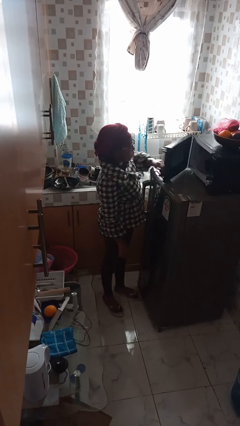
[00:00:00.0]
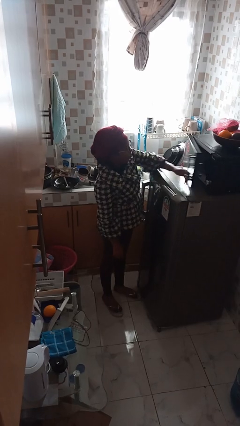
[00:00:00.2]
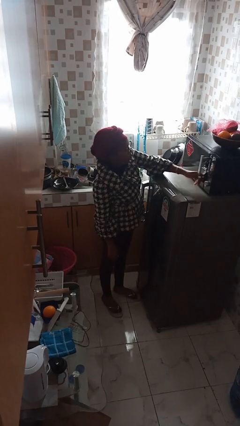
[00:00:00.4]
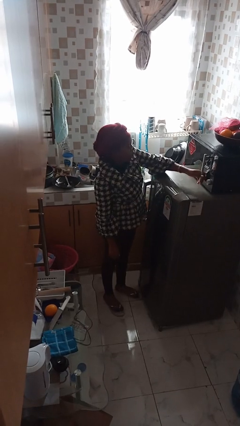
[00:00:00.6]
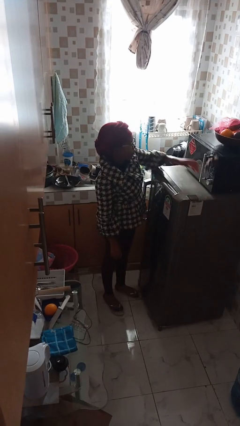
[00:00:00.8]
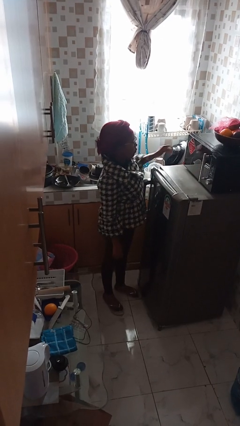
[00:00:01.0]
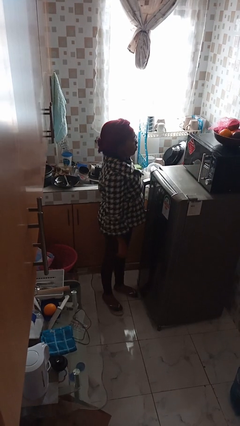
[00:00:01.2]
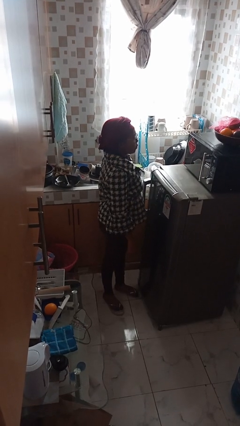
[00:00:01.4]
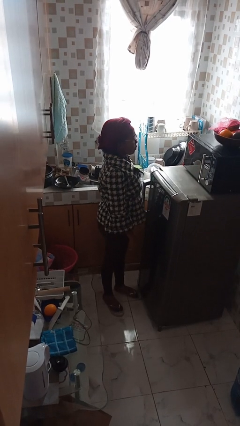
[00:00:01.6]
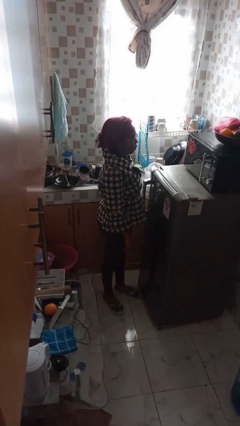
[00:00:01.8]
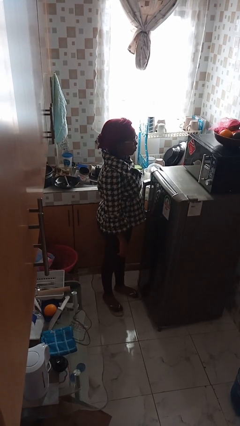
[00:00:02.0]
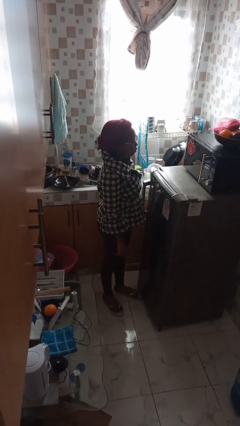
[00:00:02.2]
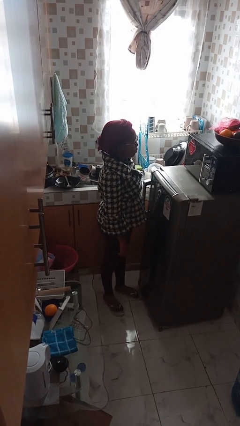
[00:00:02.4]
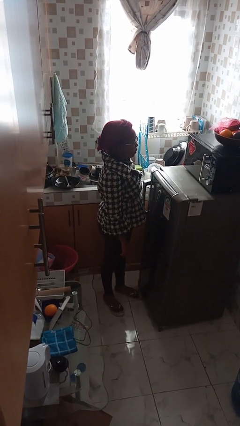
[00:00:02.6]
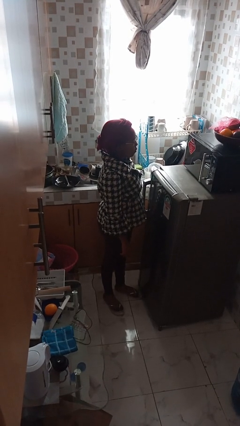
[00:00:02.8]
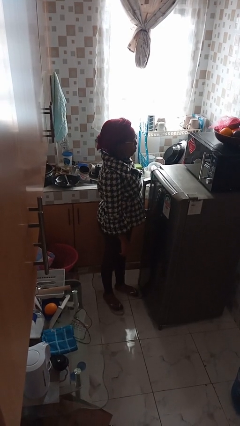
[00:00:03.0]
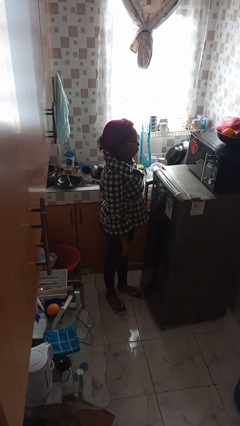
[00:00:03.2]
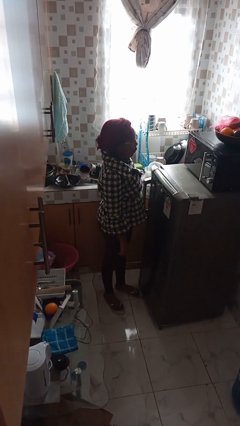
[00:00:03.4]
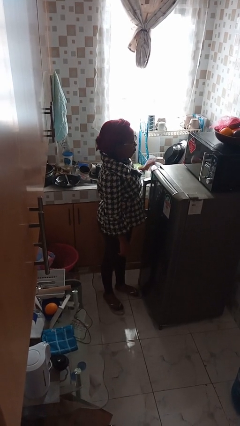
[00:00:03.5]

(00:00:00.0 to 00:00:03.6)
person closes microwave

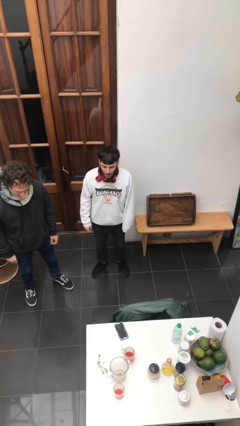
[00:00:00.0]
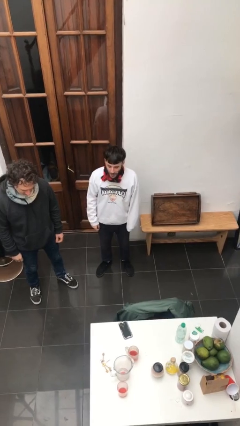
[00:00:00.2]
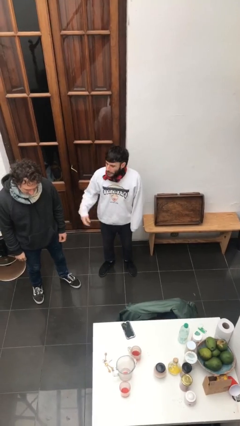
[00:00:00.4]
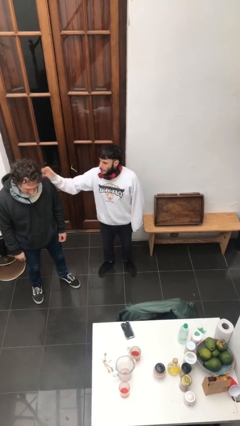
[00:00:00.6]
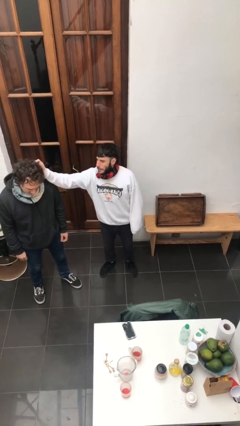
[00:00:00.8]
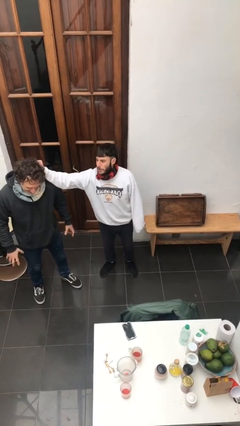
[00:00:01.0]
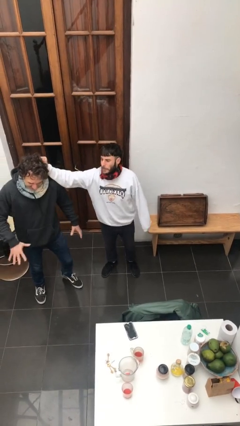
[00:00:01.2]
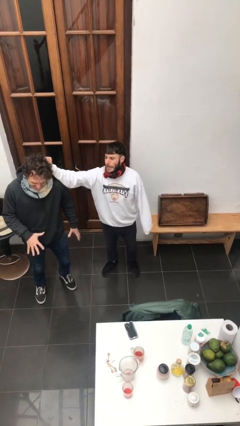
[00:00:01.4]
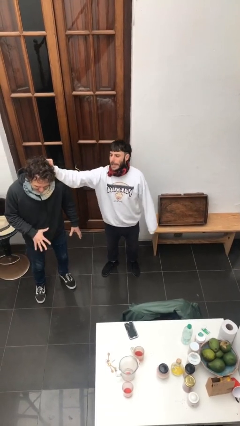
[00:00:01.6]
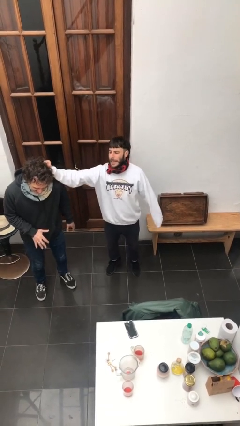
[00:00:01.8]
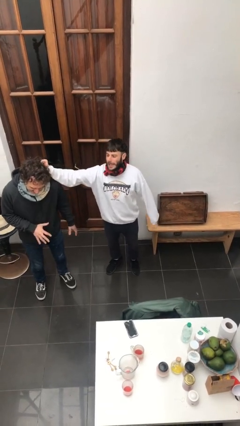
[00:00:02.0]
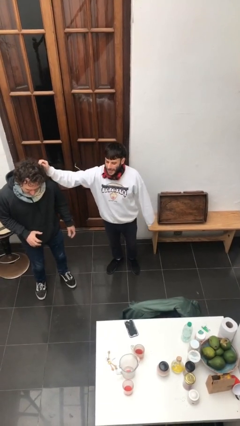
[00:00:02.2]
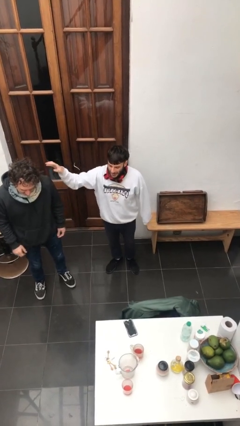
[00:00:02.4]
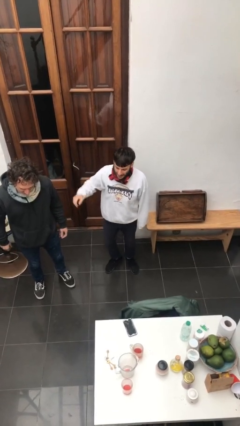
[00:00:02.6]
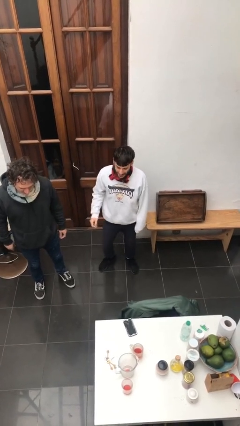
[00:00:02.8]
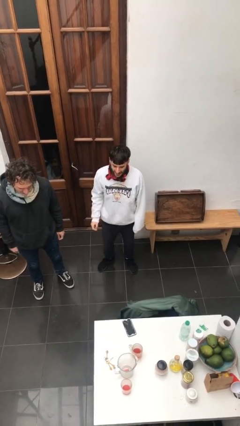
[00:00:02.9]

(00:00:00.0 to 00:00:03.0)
person grabs person by hair

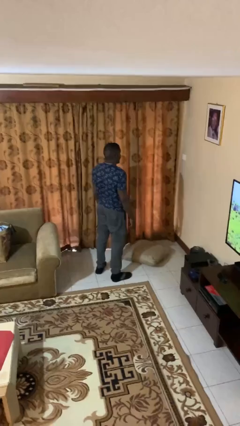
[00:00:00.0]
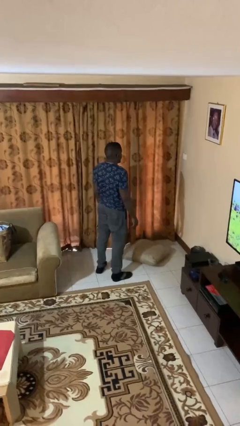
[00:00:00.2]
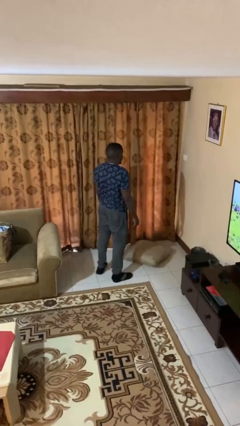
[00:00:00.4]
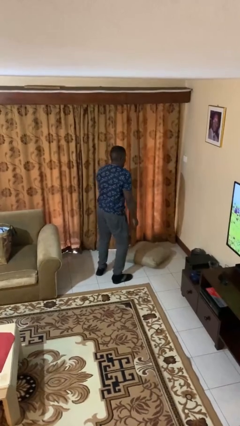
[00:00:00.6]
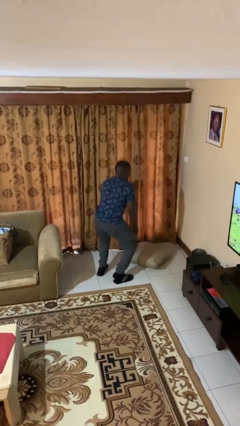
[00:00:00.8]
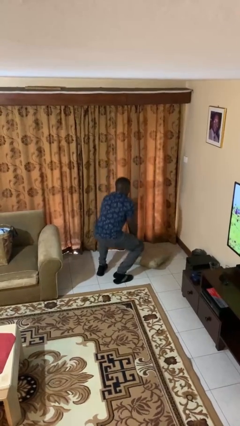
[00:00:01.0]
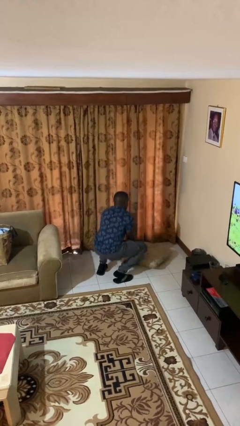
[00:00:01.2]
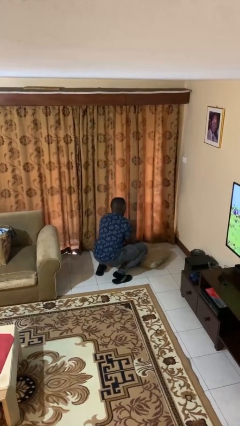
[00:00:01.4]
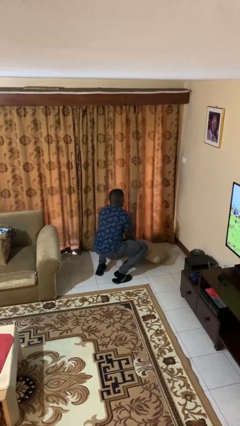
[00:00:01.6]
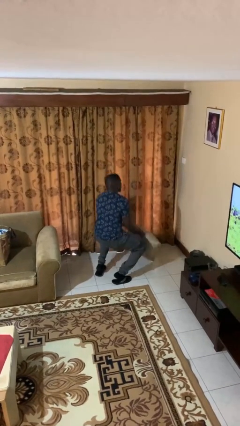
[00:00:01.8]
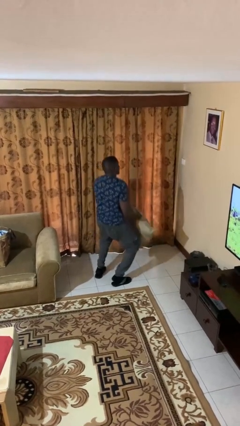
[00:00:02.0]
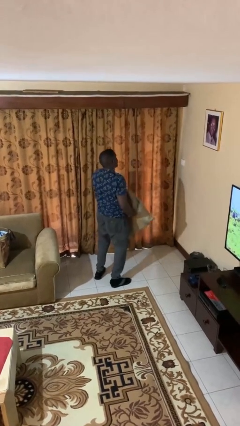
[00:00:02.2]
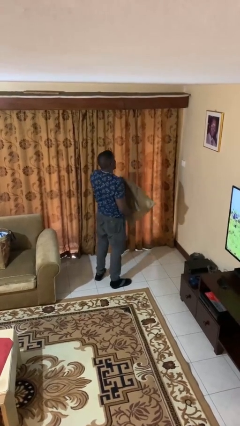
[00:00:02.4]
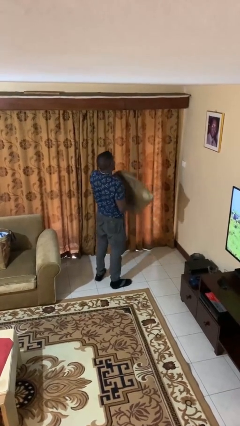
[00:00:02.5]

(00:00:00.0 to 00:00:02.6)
person picks up object from floor

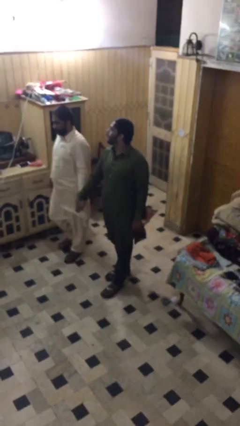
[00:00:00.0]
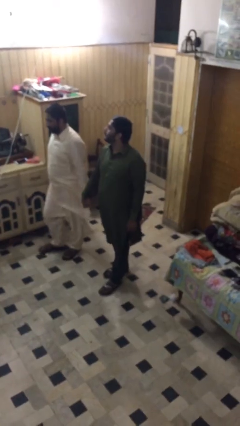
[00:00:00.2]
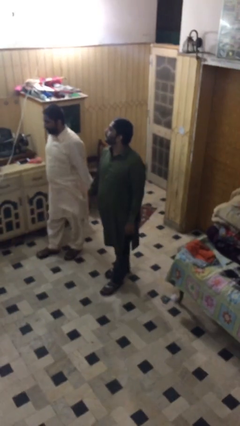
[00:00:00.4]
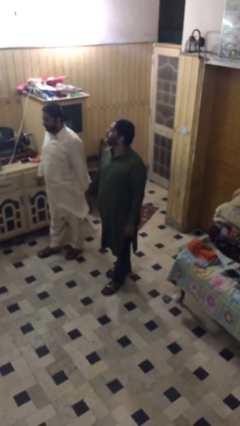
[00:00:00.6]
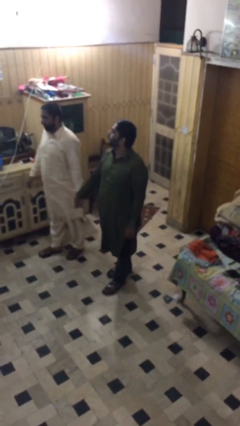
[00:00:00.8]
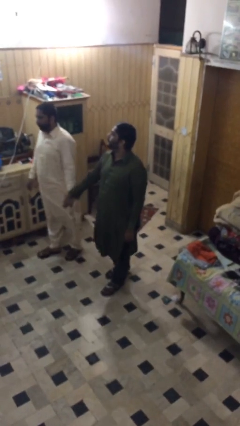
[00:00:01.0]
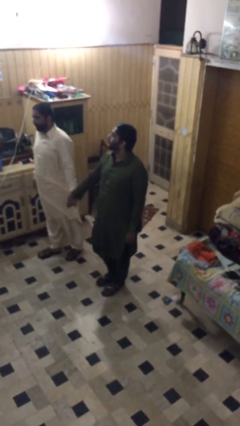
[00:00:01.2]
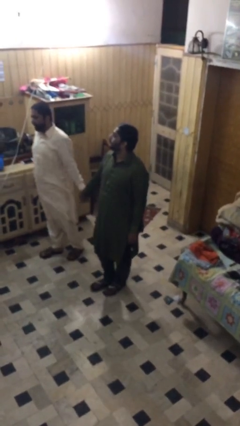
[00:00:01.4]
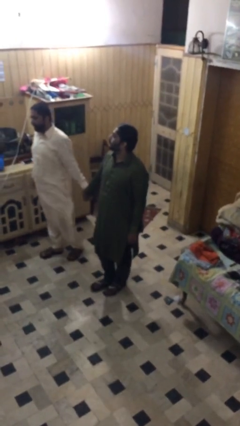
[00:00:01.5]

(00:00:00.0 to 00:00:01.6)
person holds hand

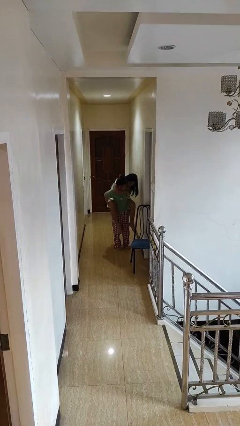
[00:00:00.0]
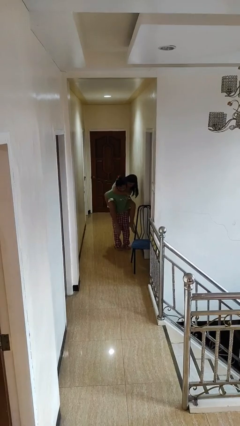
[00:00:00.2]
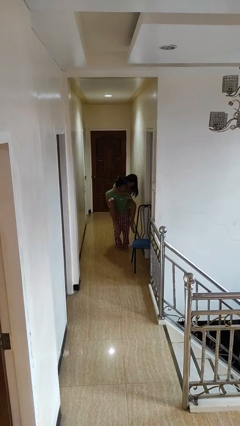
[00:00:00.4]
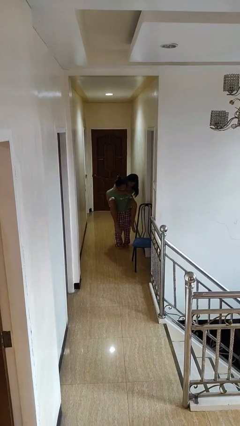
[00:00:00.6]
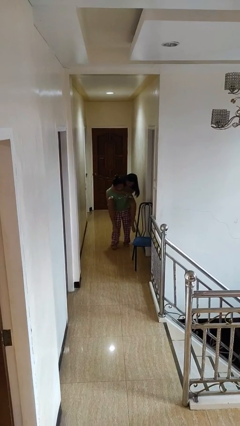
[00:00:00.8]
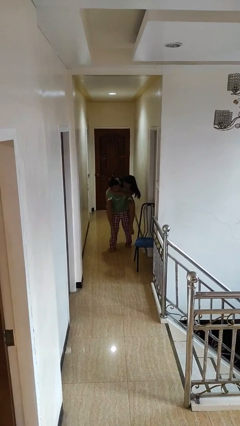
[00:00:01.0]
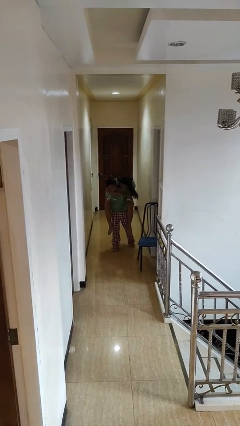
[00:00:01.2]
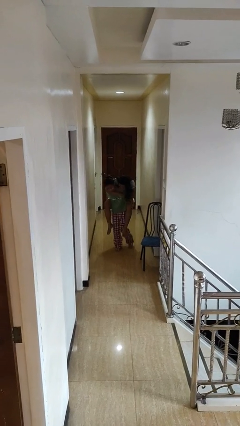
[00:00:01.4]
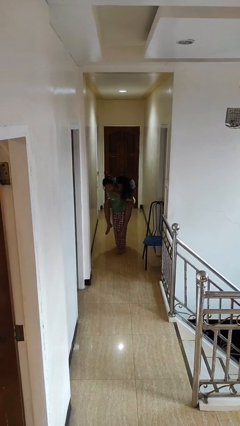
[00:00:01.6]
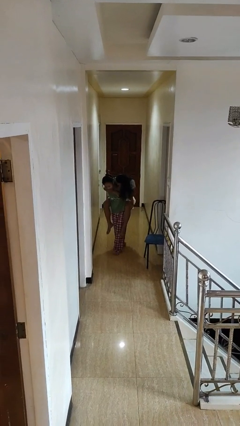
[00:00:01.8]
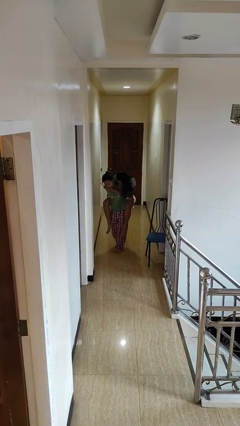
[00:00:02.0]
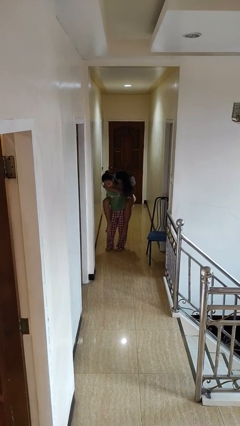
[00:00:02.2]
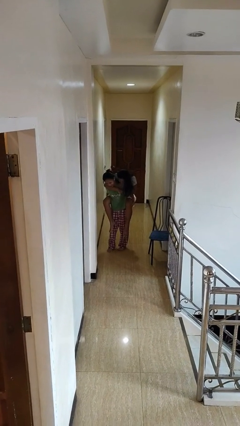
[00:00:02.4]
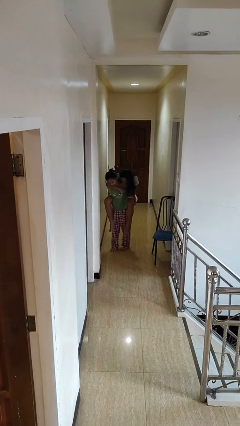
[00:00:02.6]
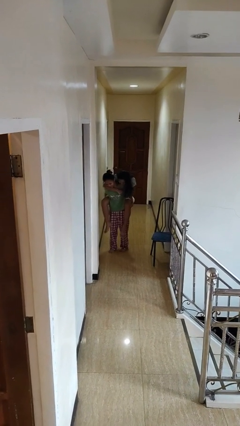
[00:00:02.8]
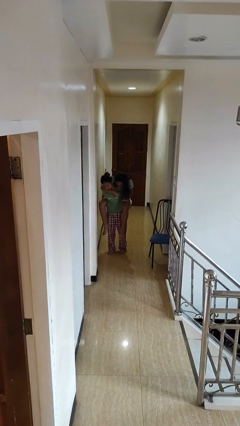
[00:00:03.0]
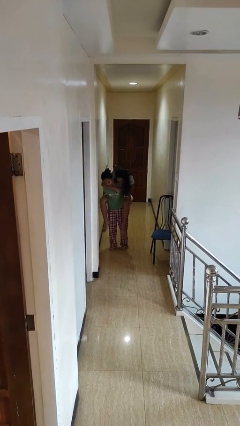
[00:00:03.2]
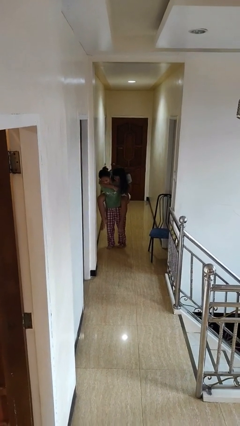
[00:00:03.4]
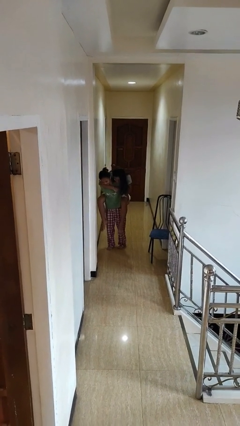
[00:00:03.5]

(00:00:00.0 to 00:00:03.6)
person carries person on back

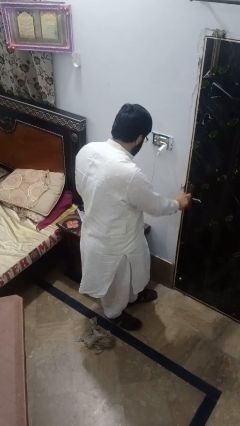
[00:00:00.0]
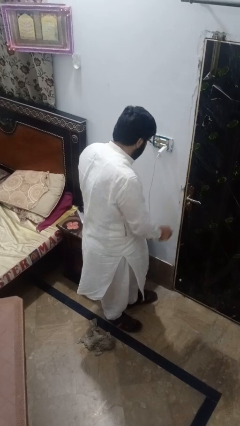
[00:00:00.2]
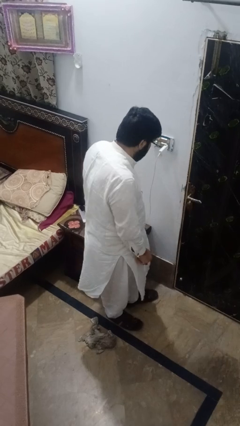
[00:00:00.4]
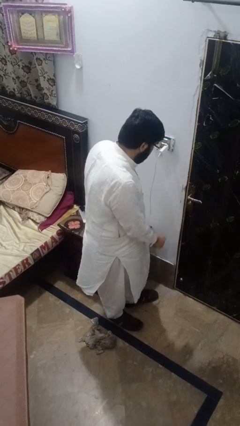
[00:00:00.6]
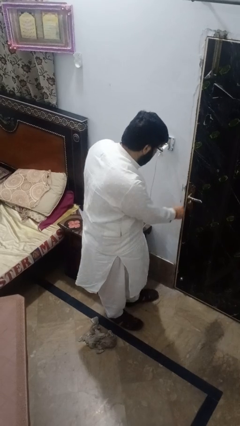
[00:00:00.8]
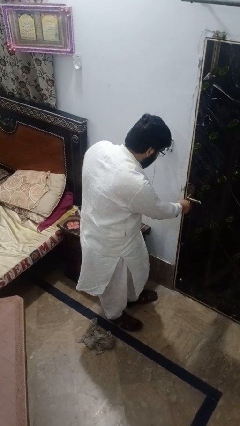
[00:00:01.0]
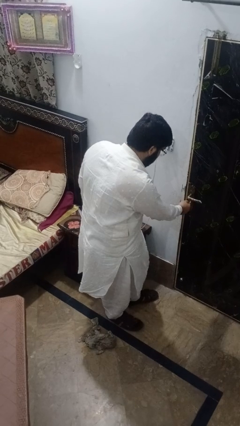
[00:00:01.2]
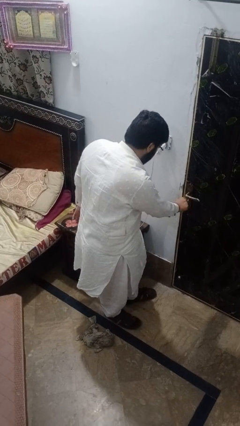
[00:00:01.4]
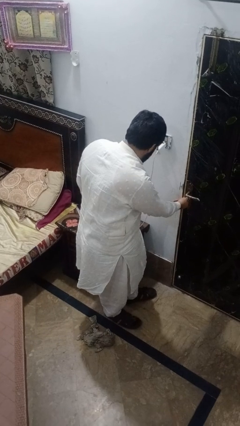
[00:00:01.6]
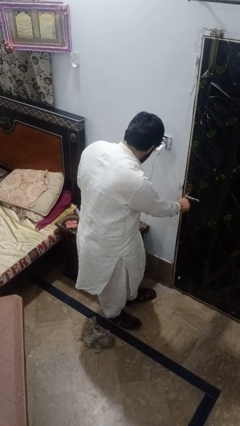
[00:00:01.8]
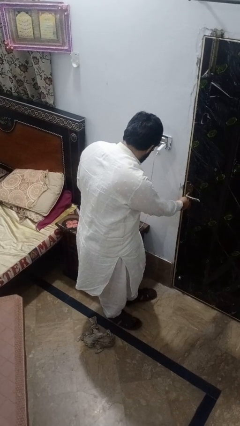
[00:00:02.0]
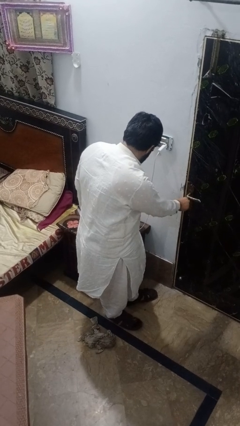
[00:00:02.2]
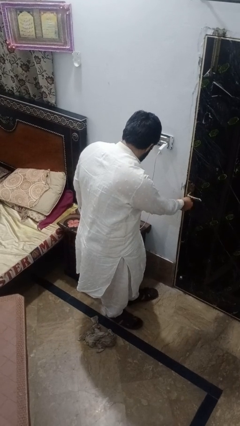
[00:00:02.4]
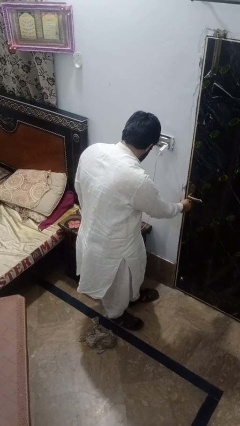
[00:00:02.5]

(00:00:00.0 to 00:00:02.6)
person locks door with keys

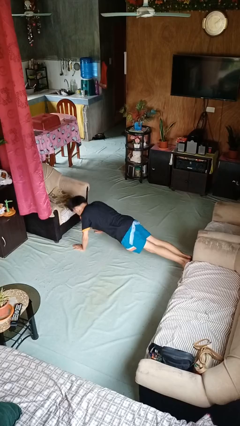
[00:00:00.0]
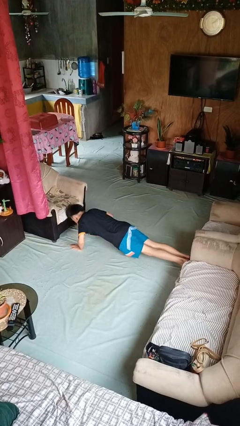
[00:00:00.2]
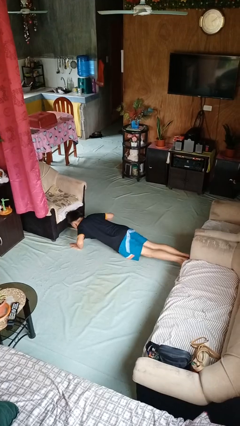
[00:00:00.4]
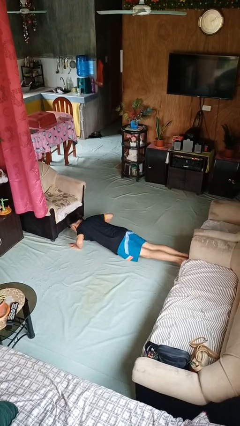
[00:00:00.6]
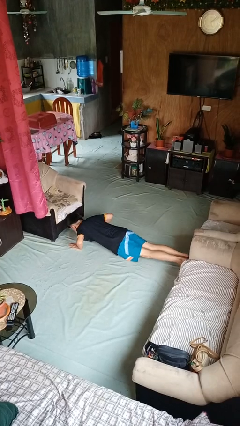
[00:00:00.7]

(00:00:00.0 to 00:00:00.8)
person exercises with pushup
